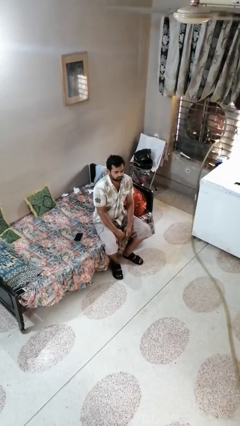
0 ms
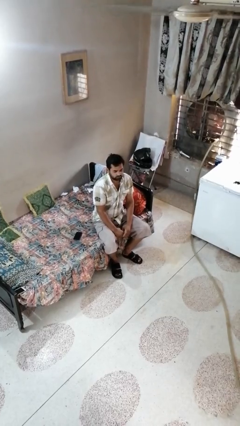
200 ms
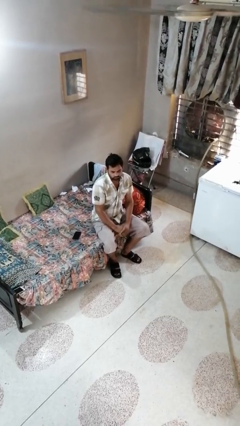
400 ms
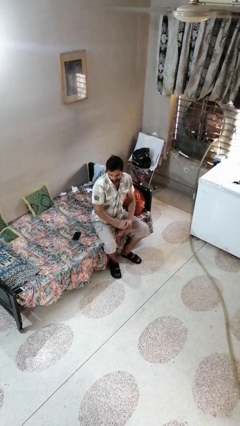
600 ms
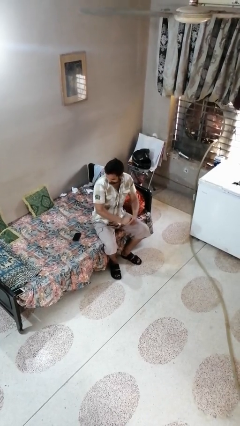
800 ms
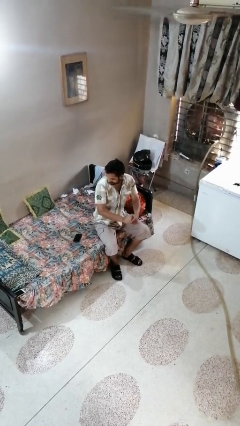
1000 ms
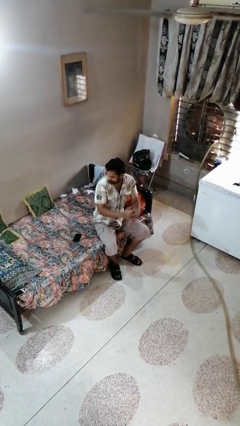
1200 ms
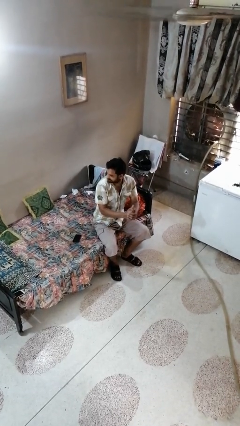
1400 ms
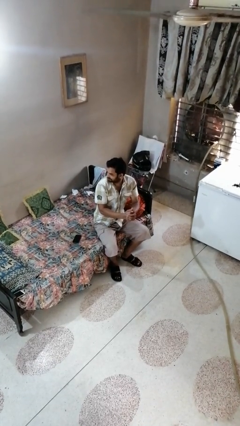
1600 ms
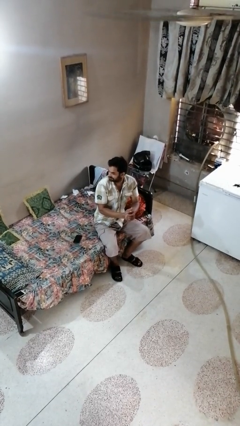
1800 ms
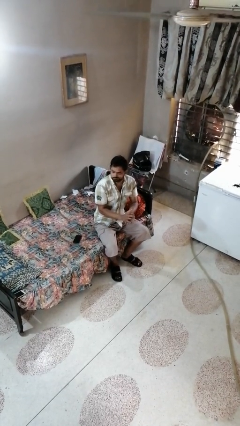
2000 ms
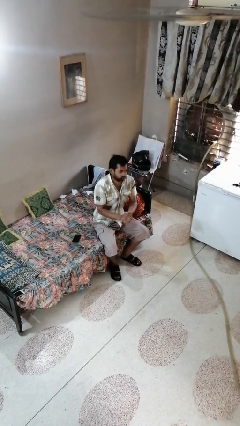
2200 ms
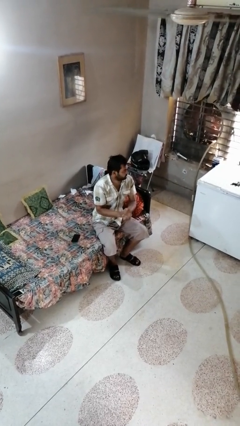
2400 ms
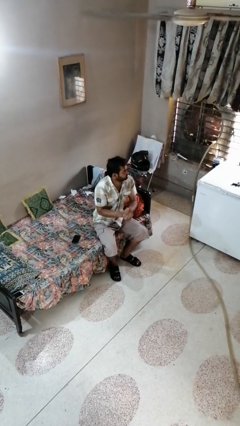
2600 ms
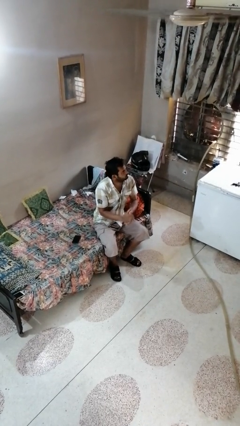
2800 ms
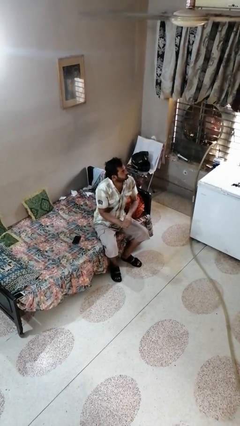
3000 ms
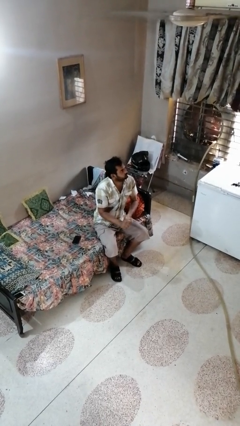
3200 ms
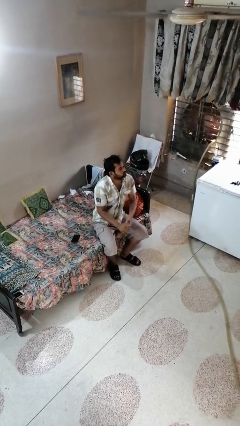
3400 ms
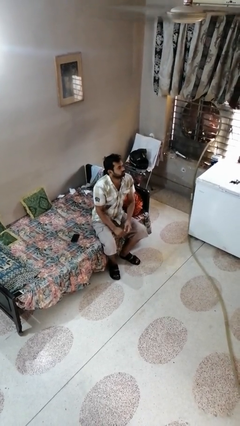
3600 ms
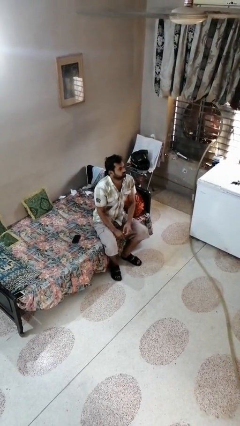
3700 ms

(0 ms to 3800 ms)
person cracks knuckles

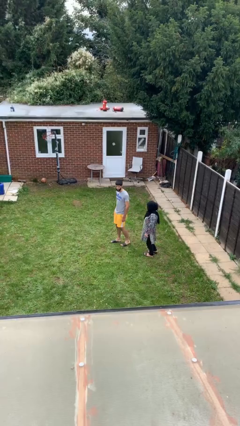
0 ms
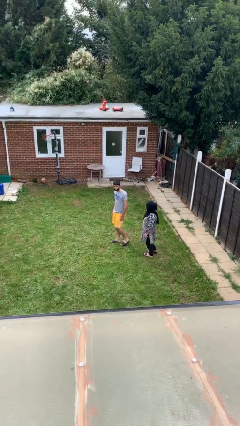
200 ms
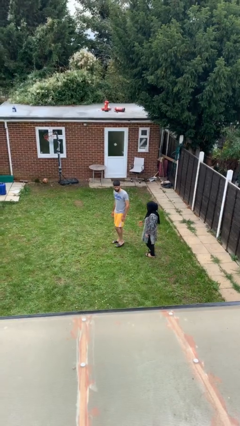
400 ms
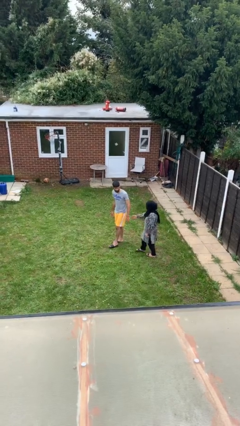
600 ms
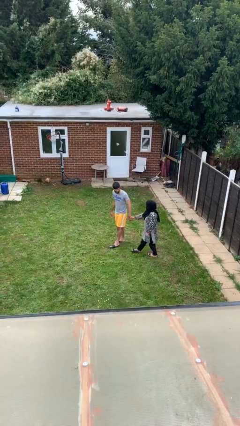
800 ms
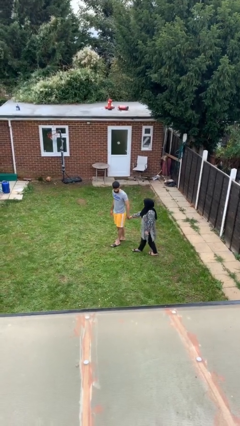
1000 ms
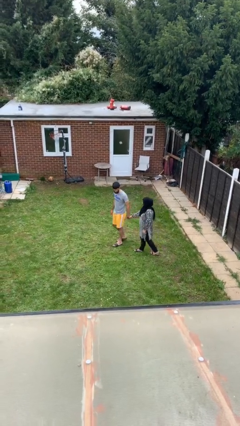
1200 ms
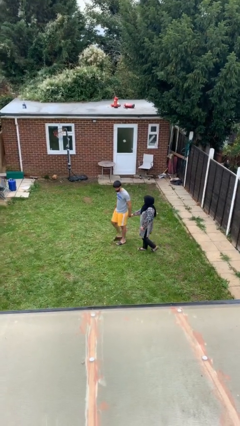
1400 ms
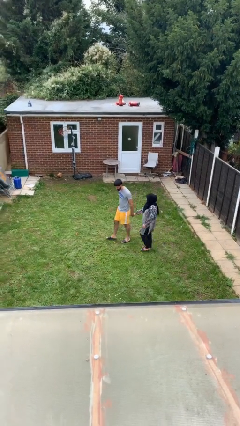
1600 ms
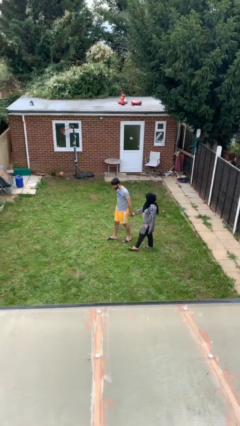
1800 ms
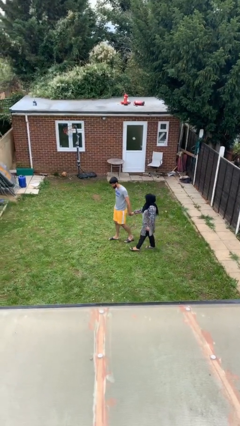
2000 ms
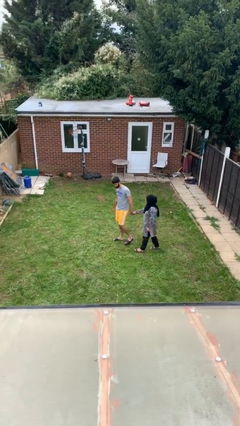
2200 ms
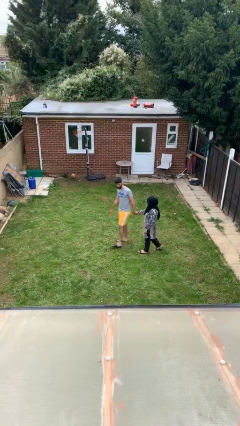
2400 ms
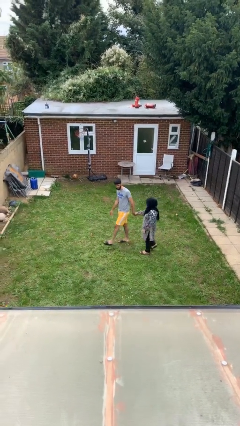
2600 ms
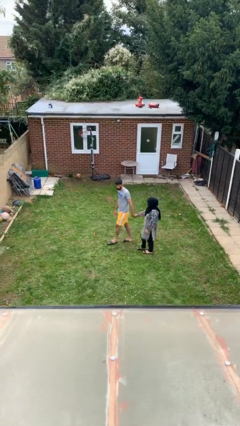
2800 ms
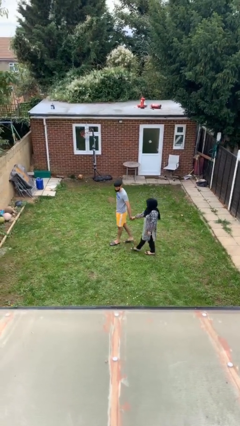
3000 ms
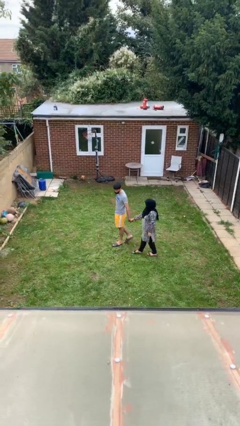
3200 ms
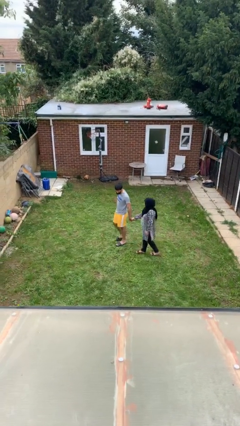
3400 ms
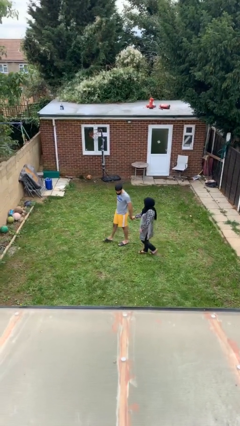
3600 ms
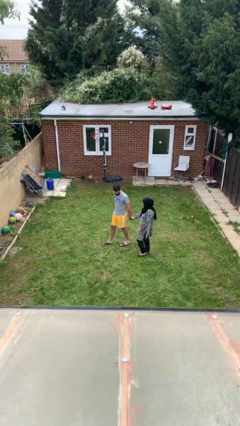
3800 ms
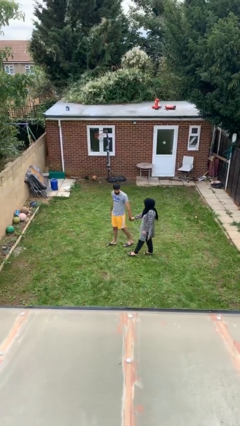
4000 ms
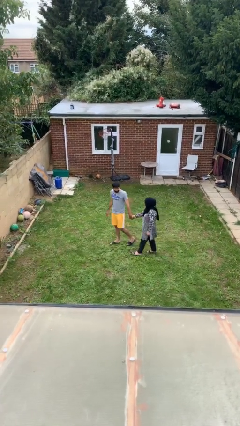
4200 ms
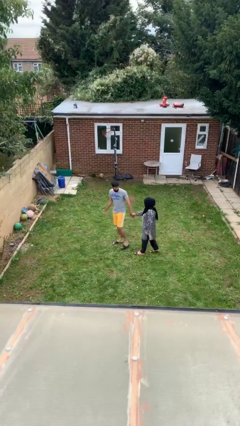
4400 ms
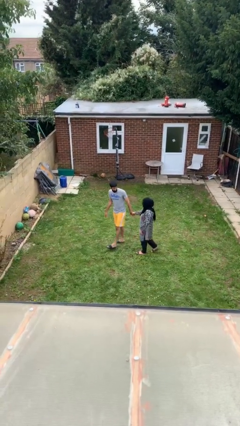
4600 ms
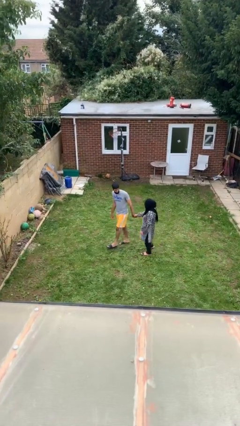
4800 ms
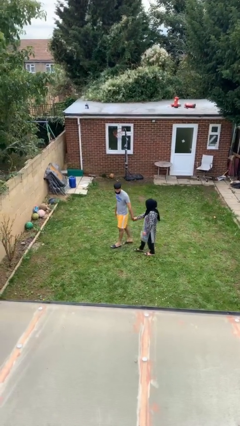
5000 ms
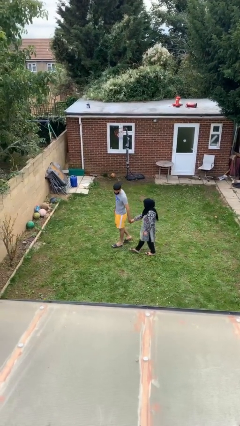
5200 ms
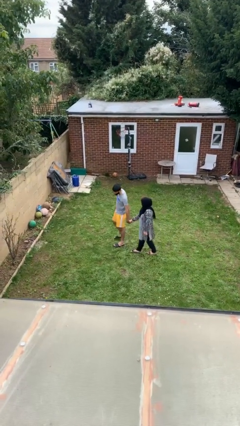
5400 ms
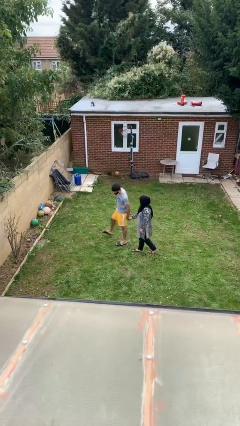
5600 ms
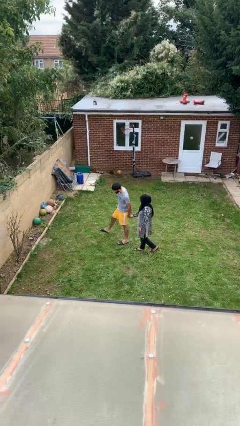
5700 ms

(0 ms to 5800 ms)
person holds hand

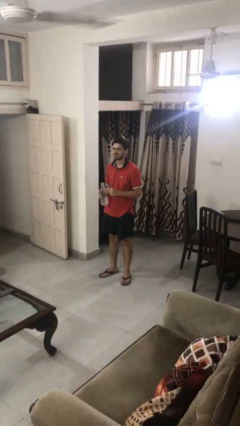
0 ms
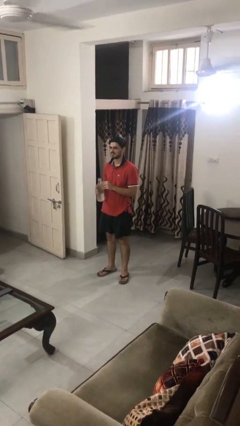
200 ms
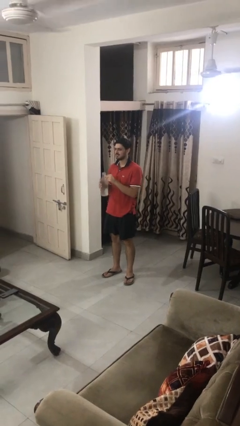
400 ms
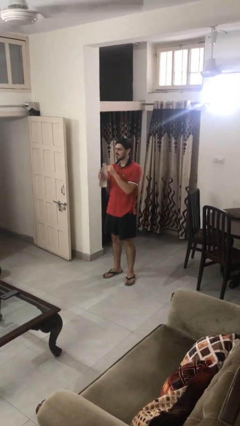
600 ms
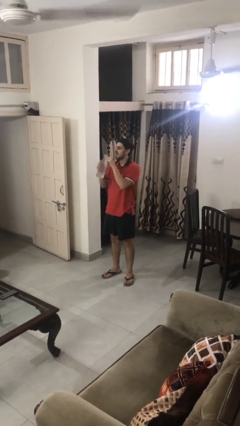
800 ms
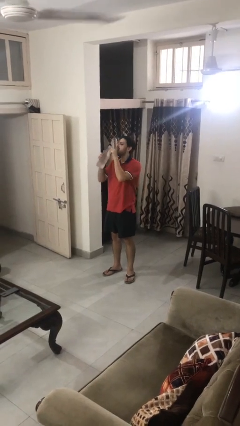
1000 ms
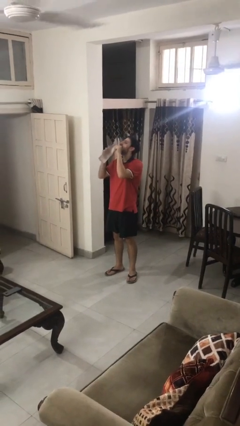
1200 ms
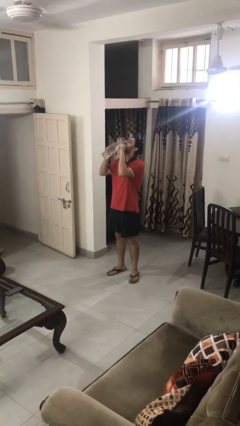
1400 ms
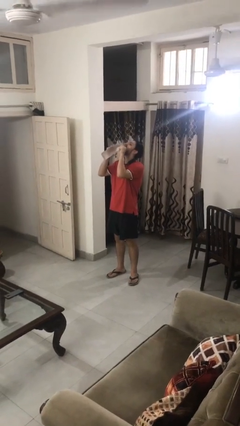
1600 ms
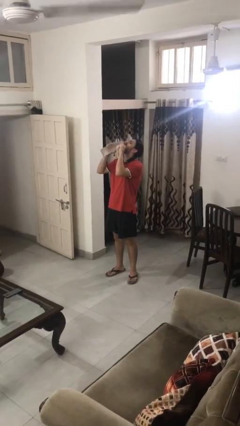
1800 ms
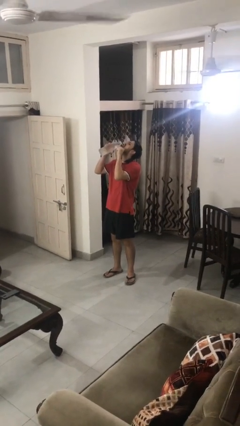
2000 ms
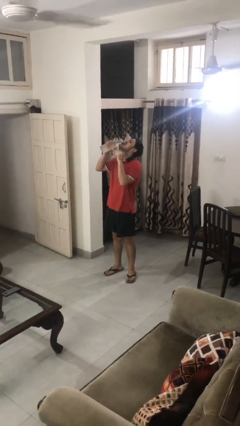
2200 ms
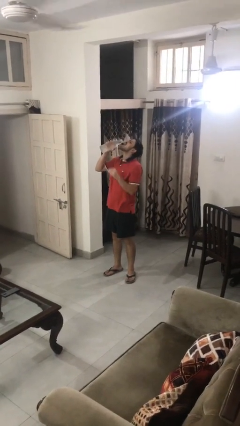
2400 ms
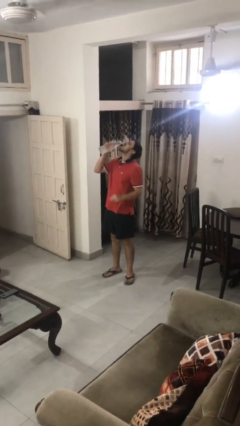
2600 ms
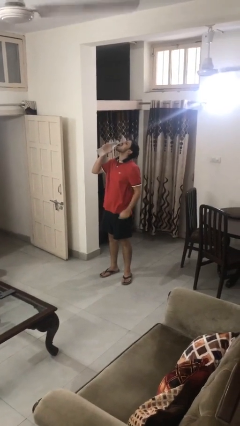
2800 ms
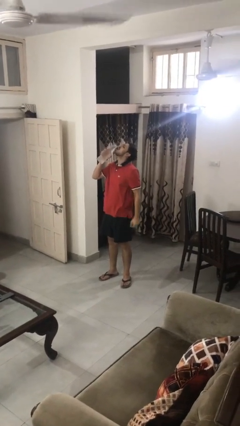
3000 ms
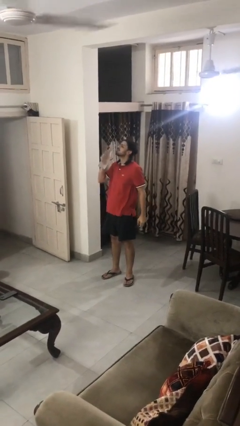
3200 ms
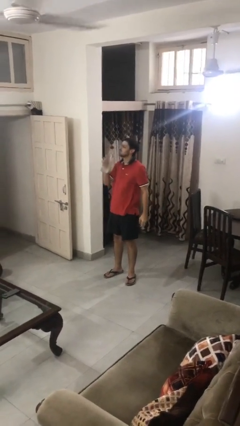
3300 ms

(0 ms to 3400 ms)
person drinks from bottle

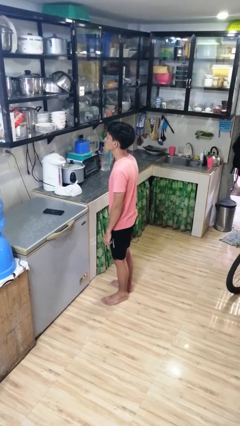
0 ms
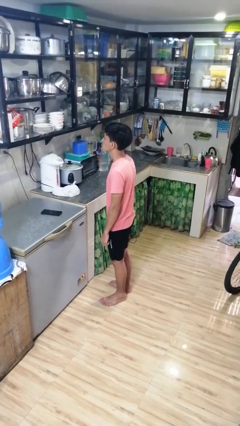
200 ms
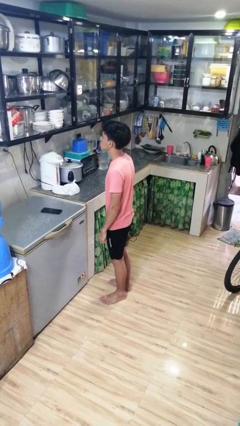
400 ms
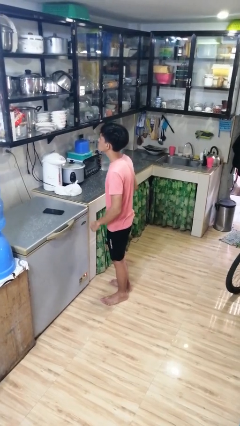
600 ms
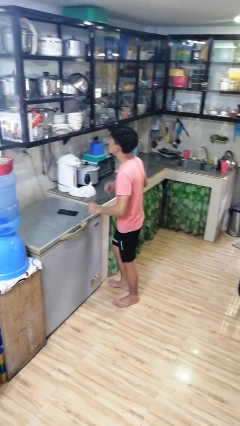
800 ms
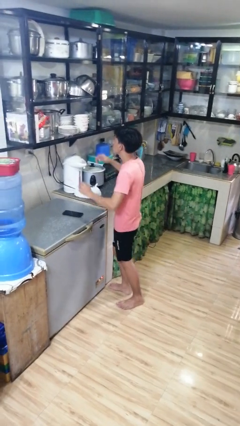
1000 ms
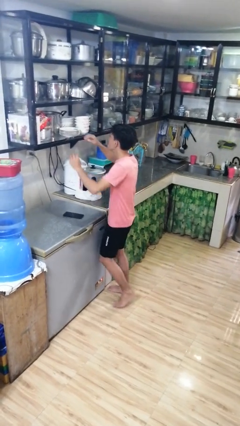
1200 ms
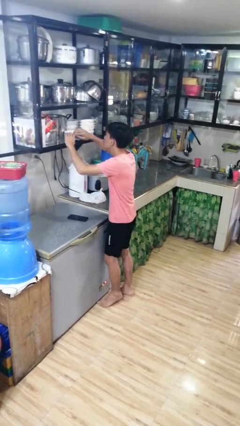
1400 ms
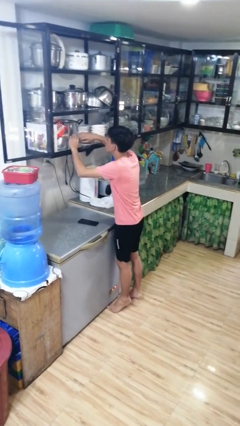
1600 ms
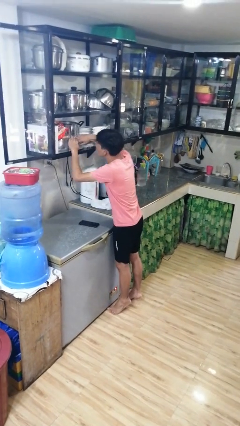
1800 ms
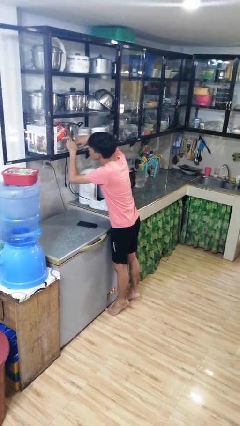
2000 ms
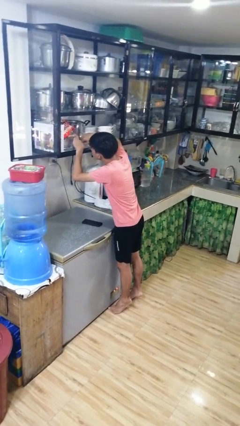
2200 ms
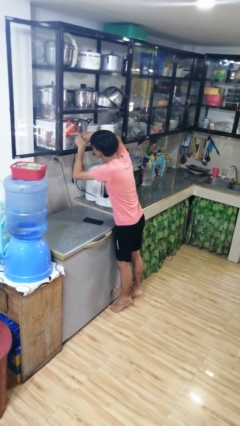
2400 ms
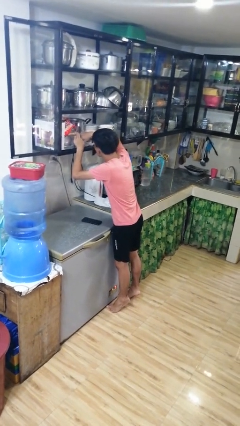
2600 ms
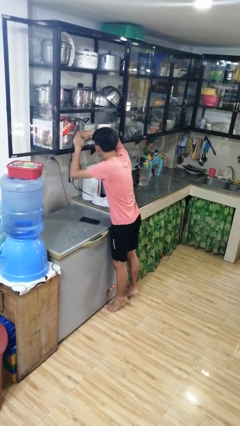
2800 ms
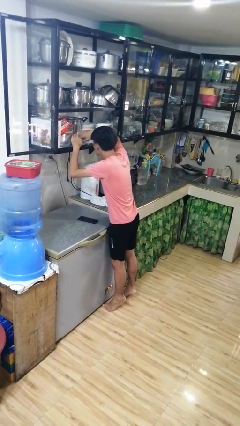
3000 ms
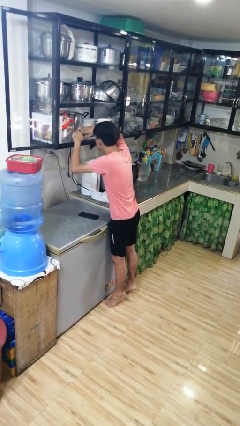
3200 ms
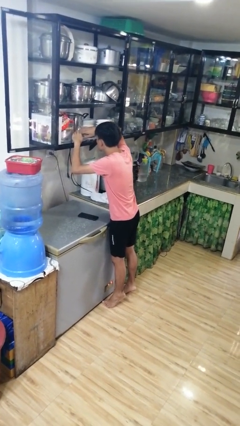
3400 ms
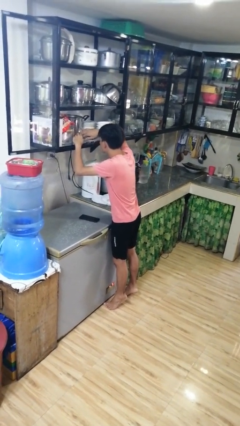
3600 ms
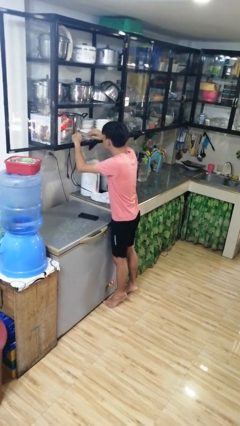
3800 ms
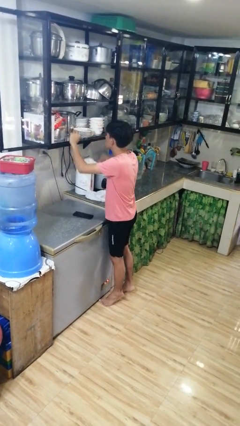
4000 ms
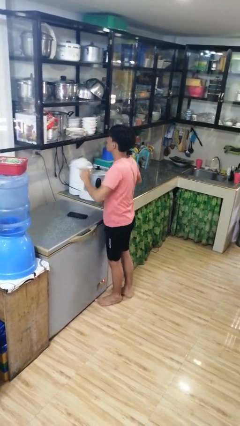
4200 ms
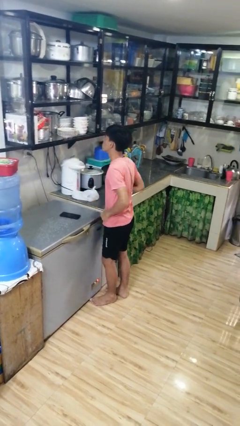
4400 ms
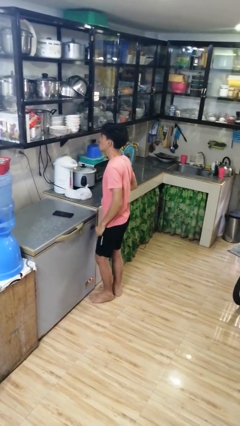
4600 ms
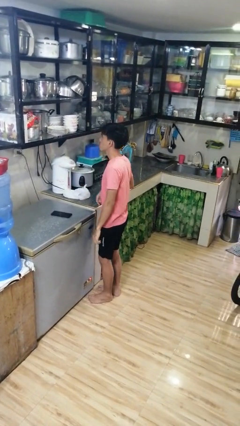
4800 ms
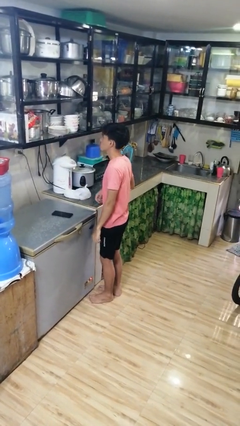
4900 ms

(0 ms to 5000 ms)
person puts on backpack
